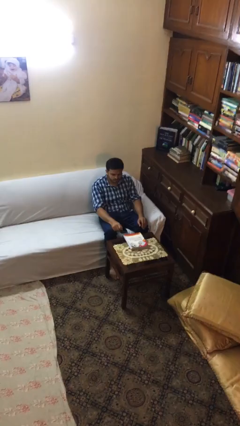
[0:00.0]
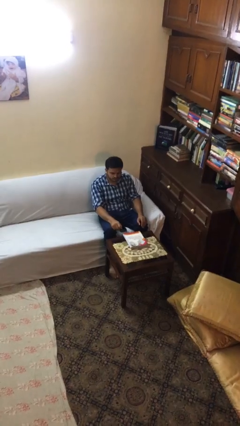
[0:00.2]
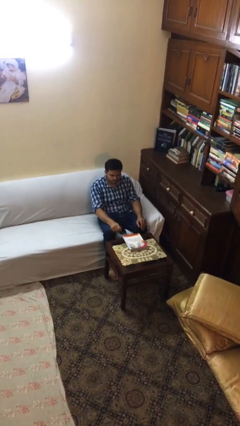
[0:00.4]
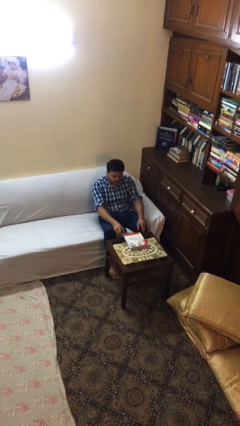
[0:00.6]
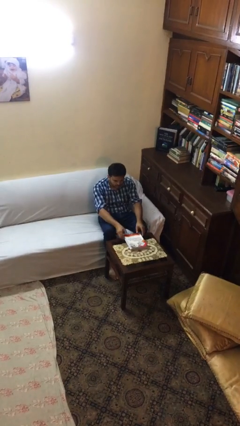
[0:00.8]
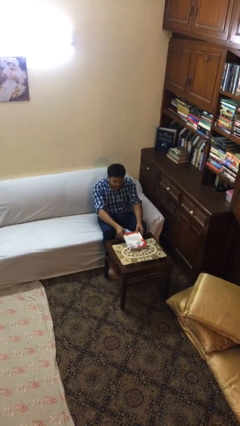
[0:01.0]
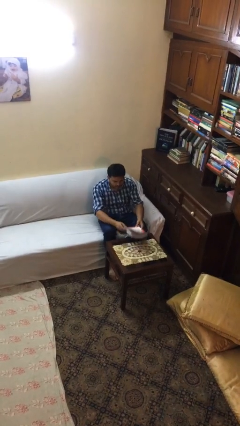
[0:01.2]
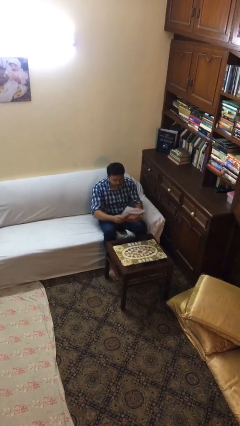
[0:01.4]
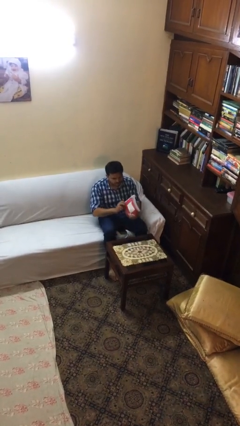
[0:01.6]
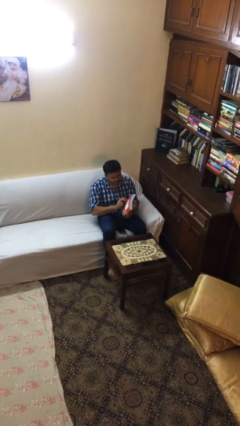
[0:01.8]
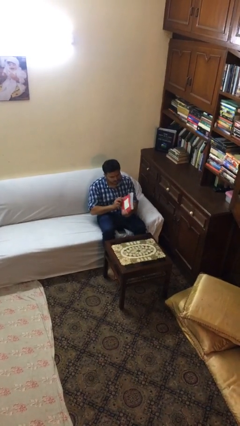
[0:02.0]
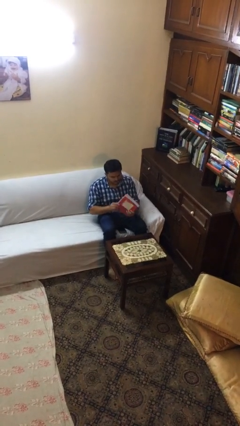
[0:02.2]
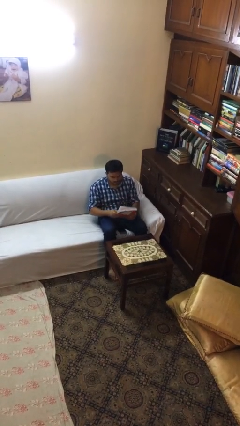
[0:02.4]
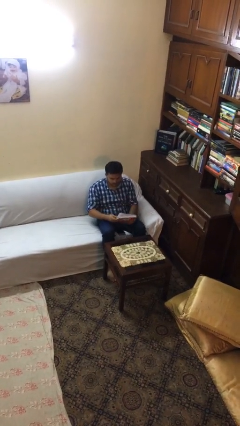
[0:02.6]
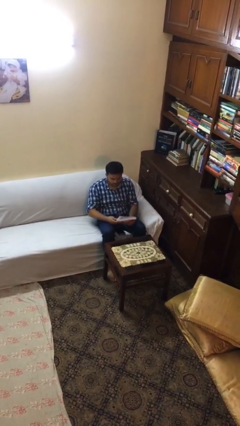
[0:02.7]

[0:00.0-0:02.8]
person picks up object from table

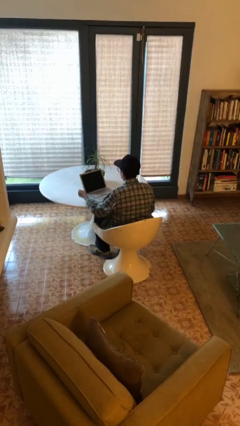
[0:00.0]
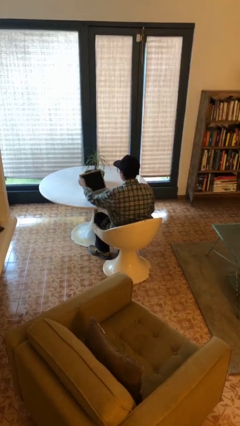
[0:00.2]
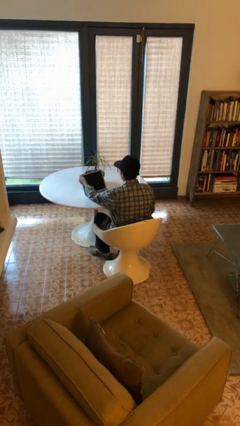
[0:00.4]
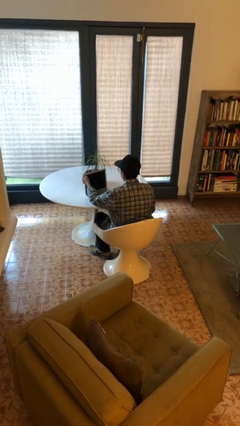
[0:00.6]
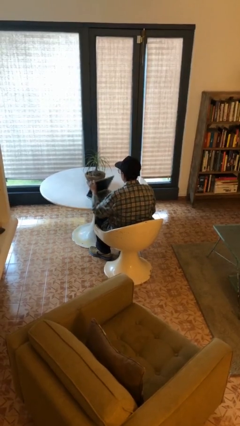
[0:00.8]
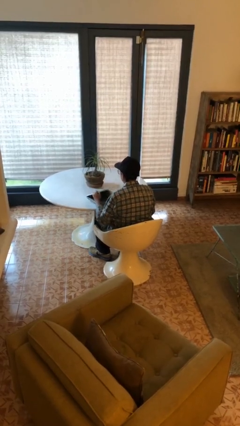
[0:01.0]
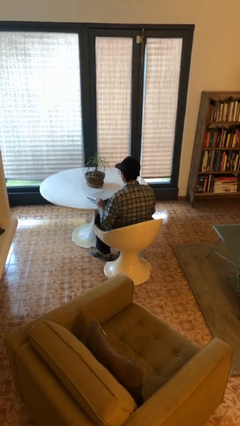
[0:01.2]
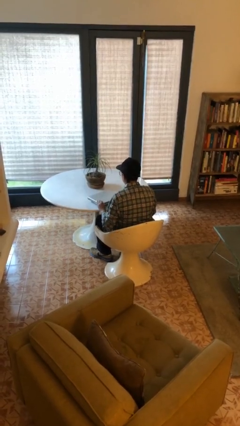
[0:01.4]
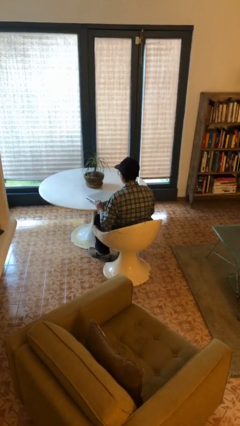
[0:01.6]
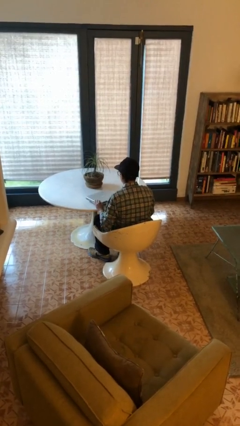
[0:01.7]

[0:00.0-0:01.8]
person closes laptop

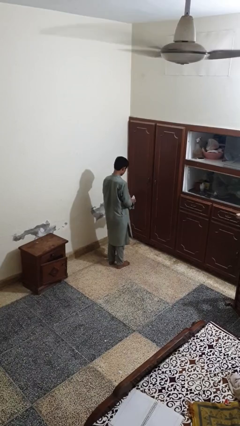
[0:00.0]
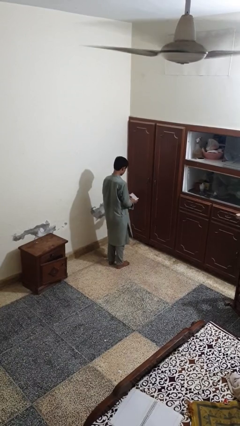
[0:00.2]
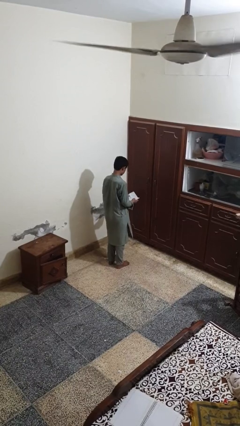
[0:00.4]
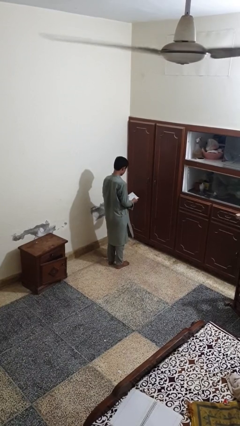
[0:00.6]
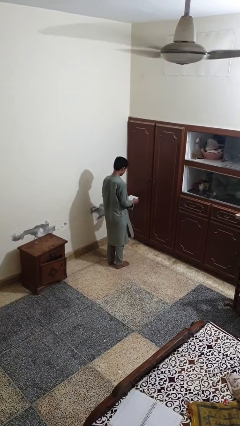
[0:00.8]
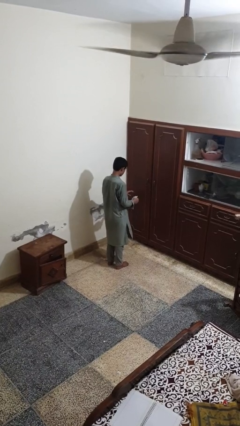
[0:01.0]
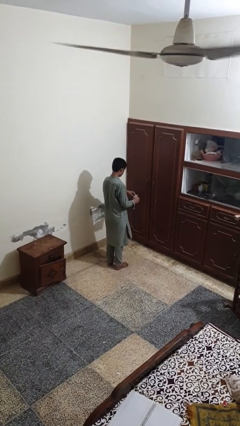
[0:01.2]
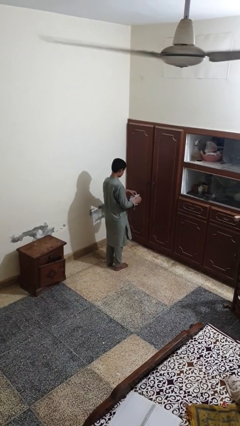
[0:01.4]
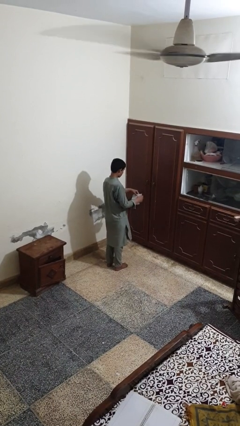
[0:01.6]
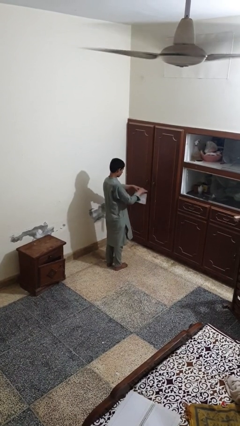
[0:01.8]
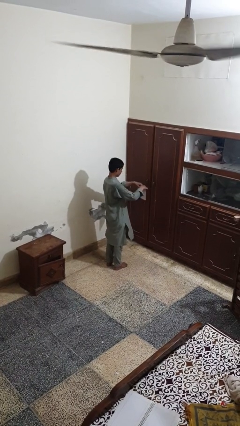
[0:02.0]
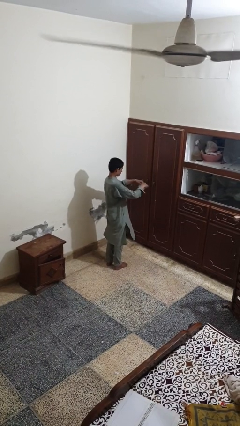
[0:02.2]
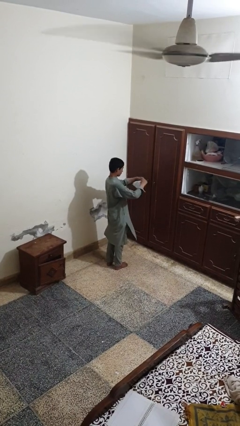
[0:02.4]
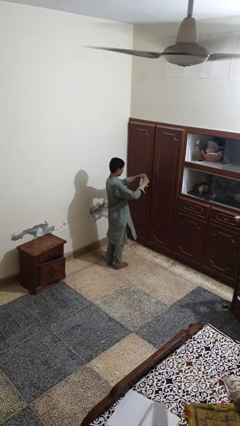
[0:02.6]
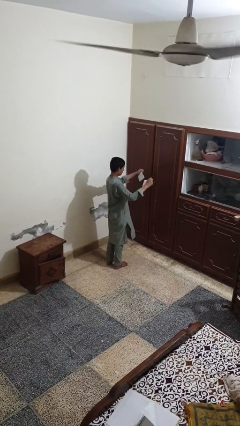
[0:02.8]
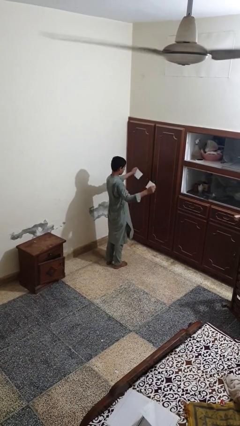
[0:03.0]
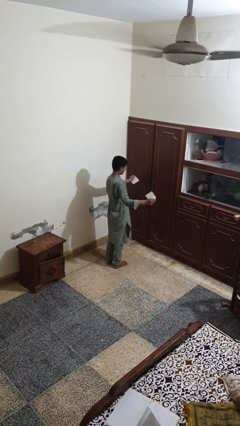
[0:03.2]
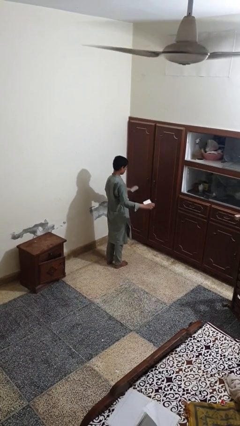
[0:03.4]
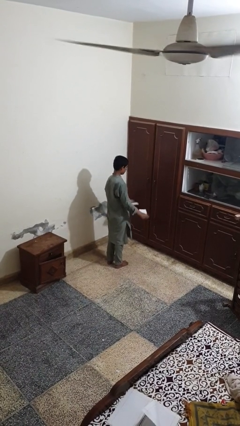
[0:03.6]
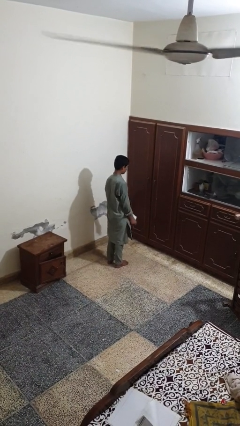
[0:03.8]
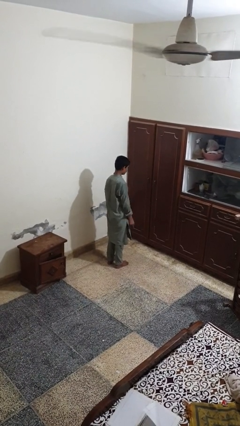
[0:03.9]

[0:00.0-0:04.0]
person tears paper

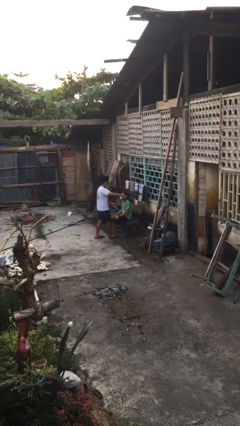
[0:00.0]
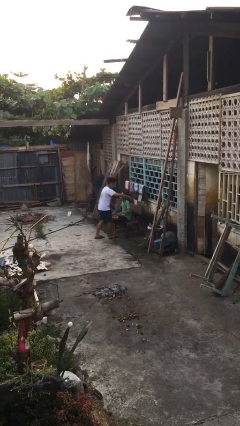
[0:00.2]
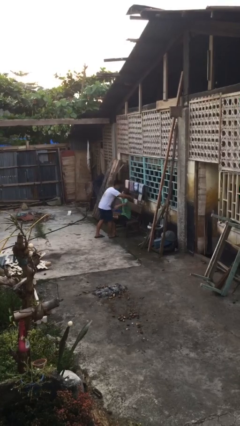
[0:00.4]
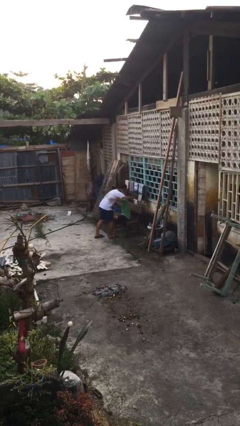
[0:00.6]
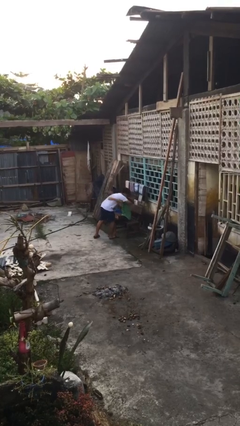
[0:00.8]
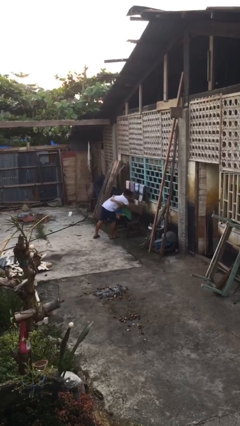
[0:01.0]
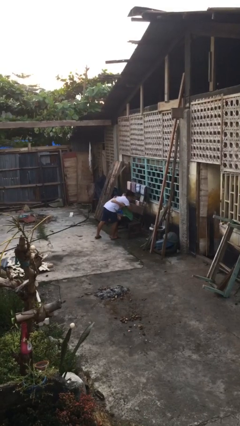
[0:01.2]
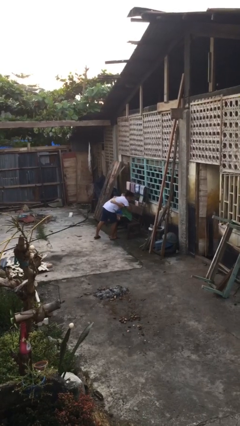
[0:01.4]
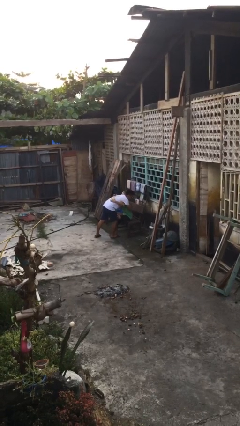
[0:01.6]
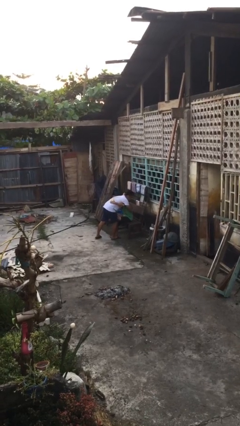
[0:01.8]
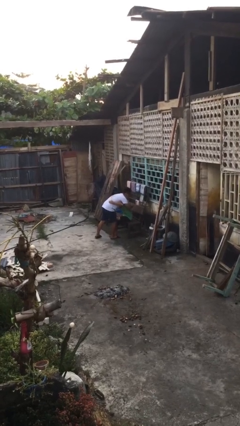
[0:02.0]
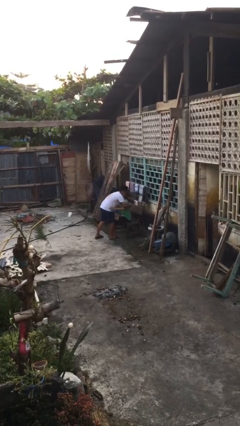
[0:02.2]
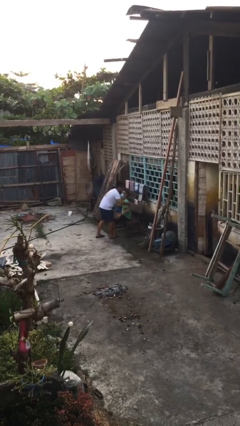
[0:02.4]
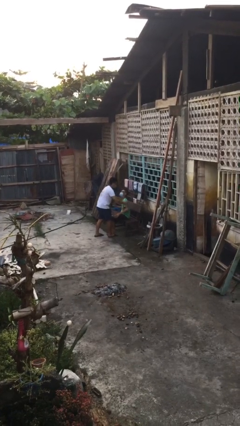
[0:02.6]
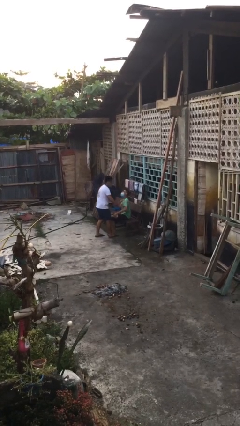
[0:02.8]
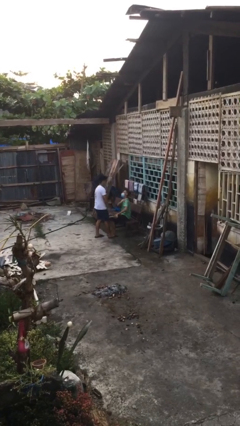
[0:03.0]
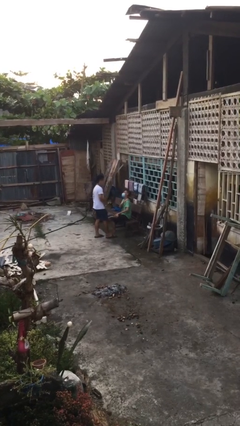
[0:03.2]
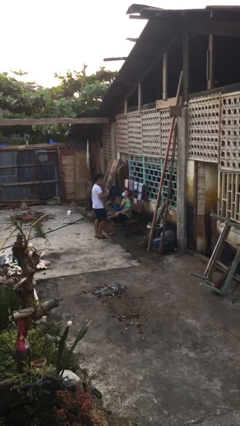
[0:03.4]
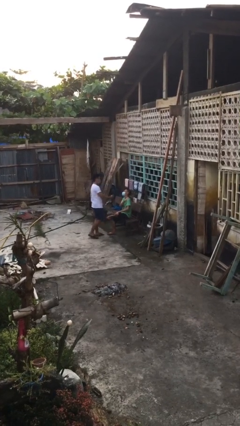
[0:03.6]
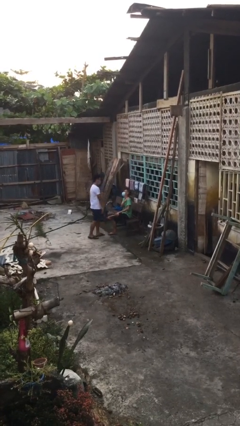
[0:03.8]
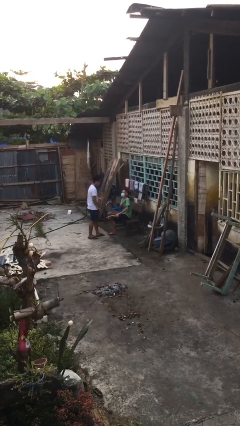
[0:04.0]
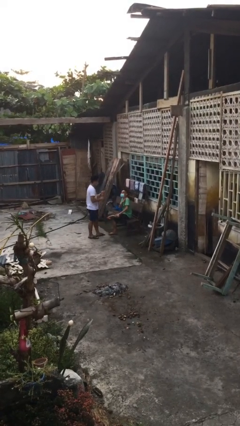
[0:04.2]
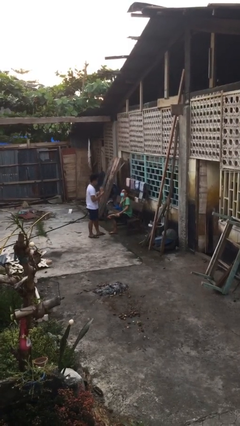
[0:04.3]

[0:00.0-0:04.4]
person embraces person

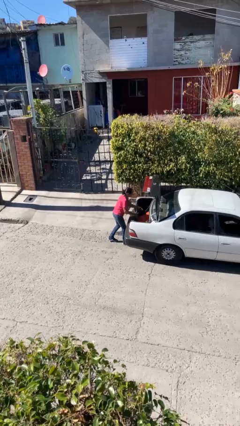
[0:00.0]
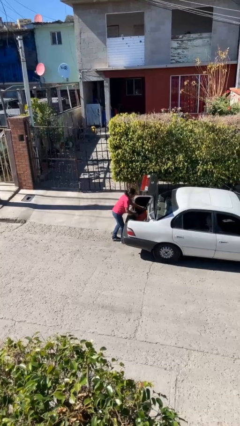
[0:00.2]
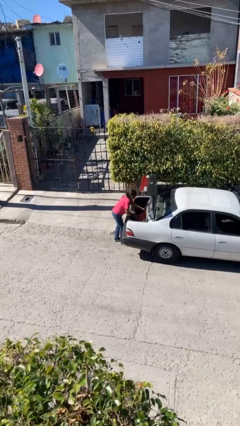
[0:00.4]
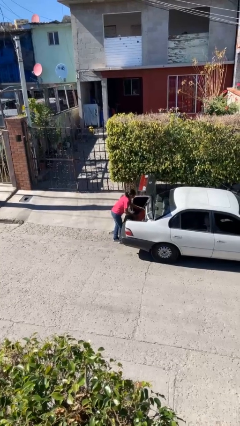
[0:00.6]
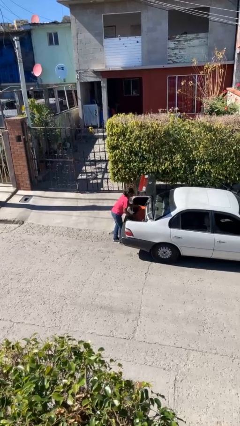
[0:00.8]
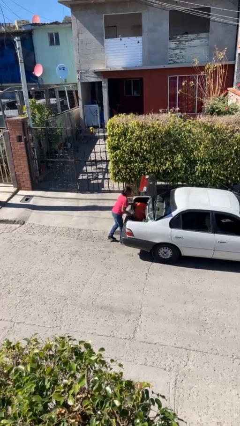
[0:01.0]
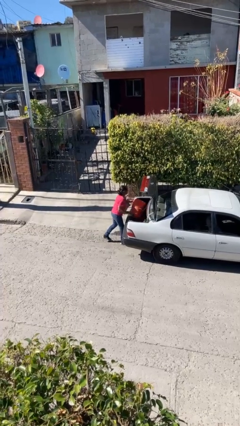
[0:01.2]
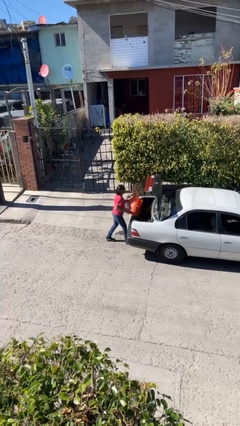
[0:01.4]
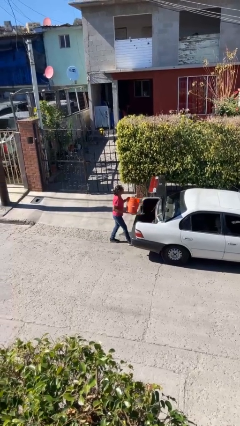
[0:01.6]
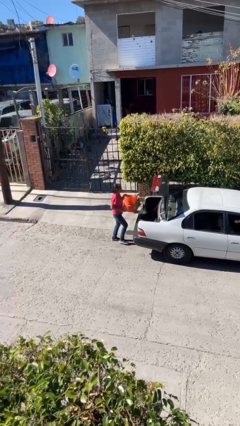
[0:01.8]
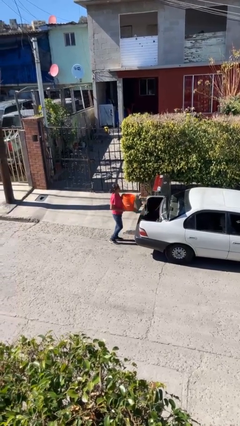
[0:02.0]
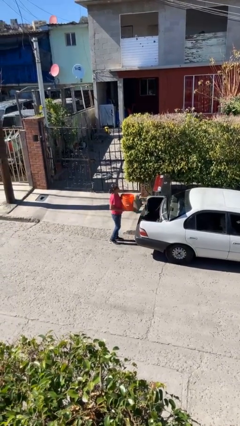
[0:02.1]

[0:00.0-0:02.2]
person unloads car

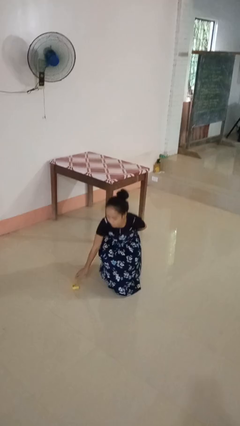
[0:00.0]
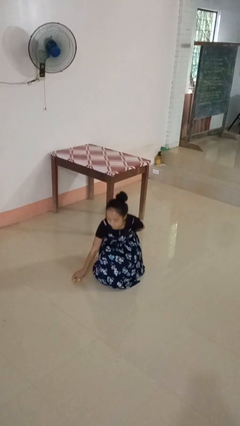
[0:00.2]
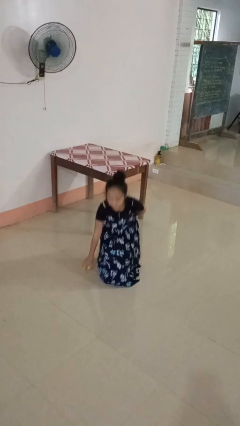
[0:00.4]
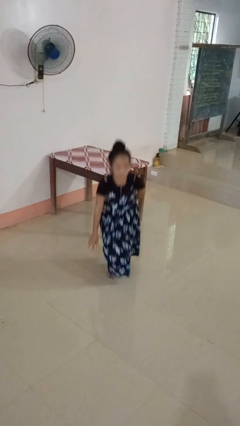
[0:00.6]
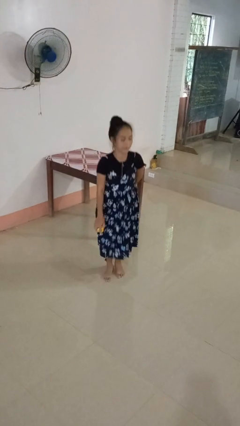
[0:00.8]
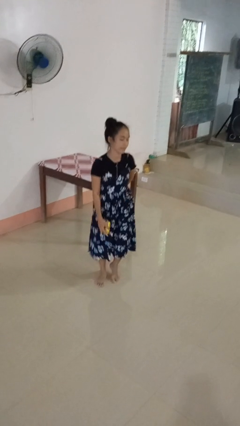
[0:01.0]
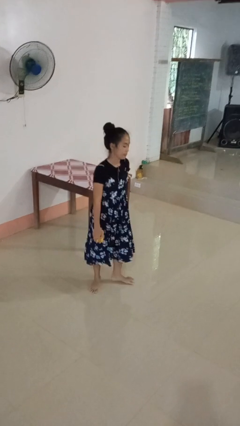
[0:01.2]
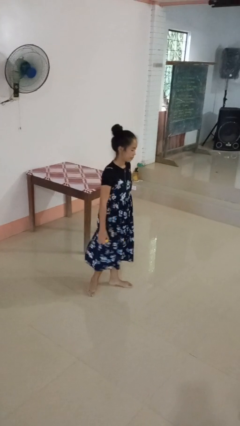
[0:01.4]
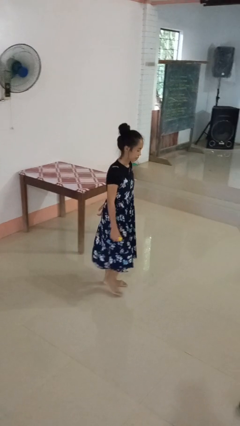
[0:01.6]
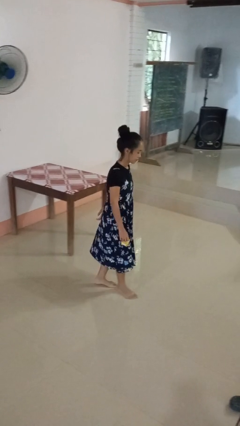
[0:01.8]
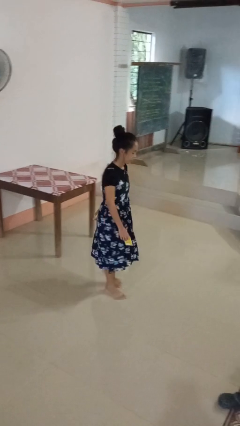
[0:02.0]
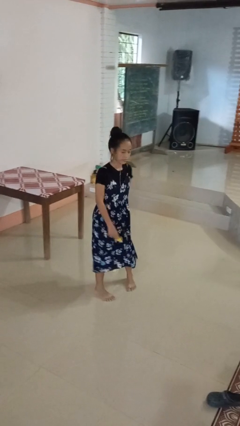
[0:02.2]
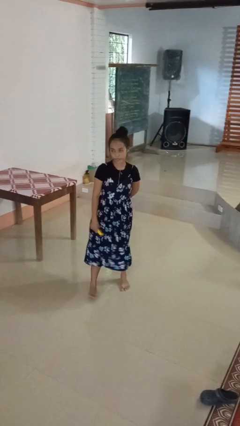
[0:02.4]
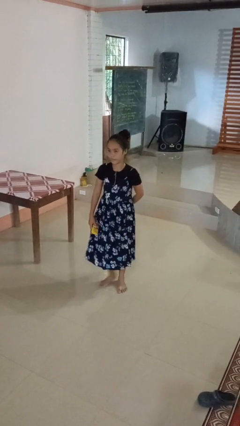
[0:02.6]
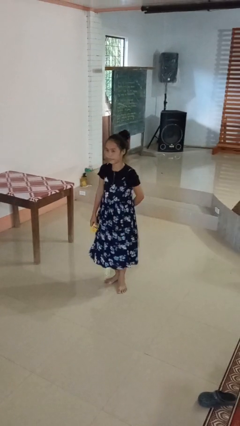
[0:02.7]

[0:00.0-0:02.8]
person picks up object from floor
